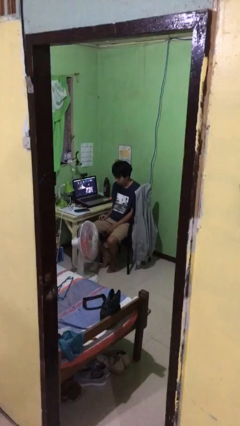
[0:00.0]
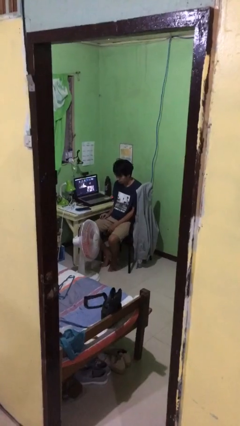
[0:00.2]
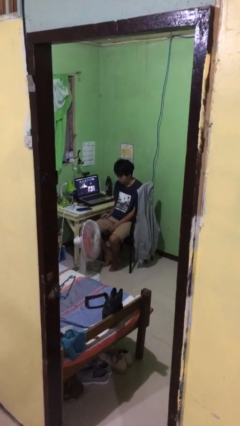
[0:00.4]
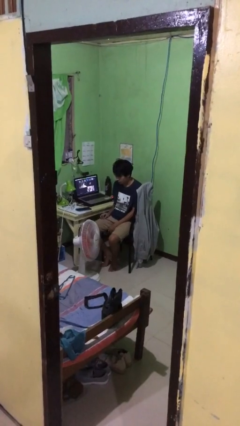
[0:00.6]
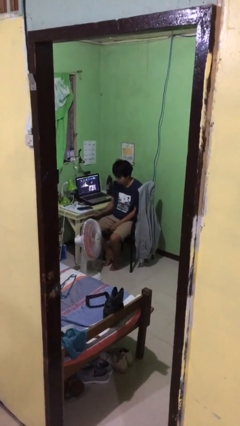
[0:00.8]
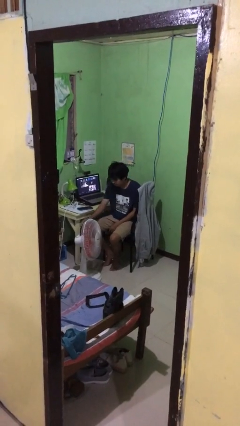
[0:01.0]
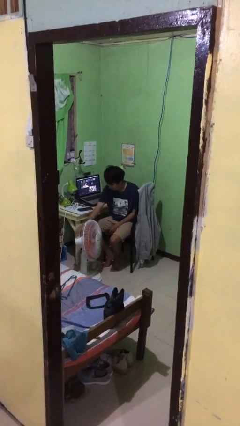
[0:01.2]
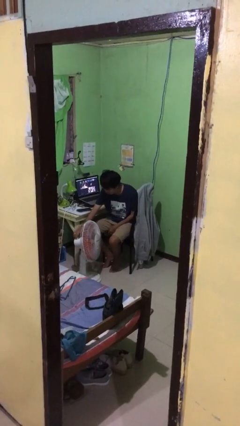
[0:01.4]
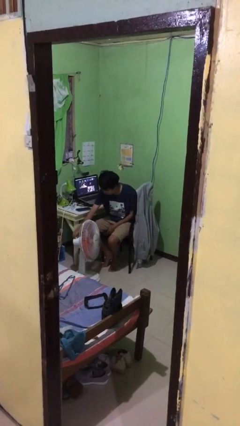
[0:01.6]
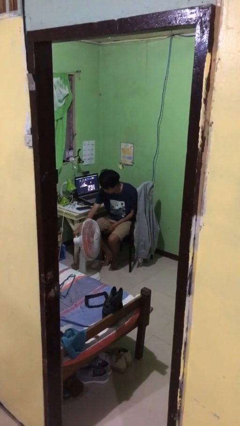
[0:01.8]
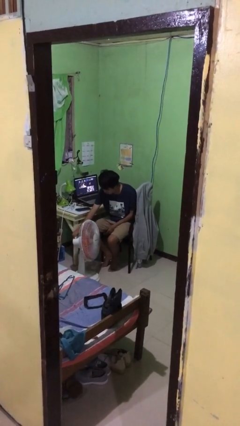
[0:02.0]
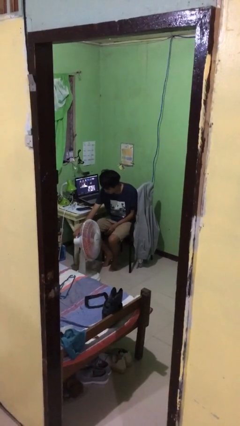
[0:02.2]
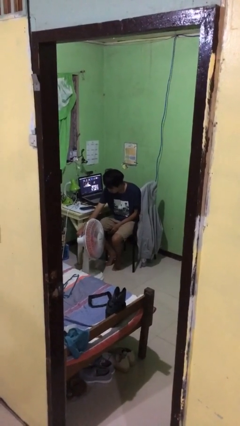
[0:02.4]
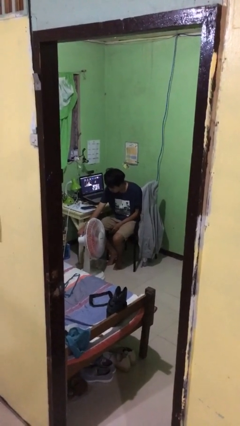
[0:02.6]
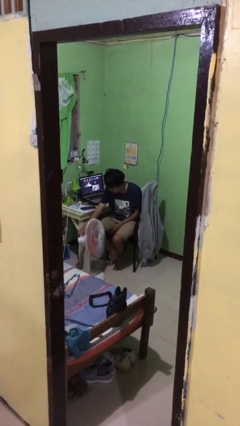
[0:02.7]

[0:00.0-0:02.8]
person turns on fan

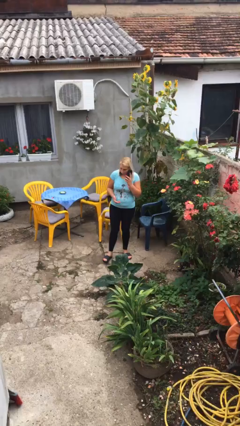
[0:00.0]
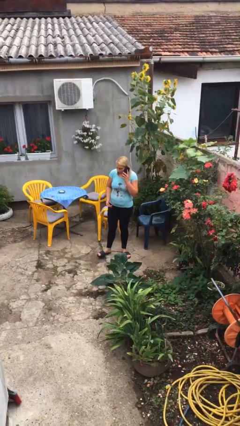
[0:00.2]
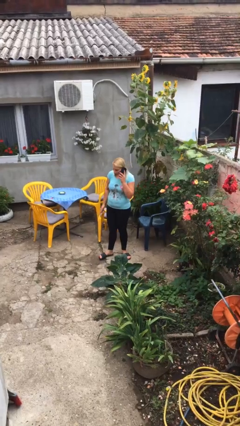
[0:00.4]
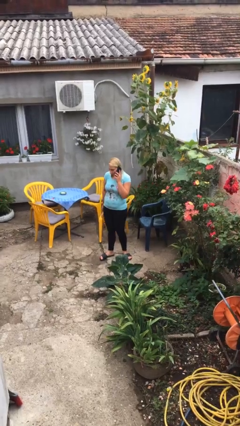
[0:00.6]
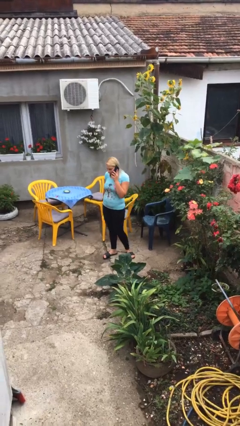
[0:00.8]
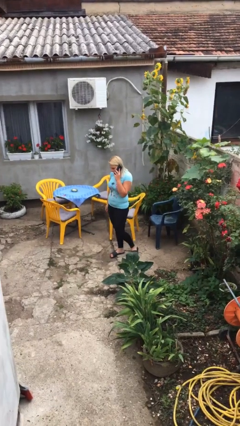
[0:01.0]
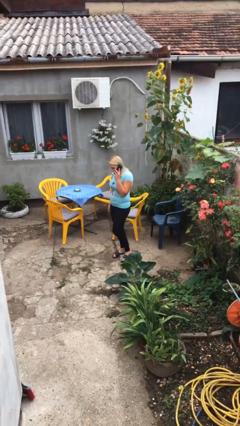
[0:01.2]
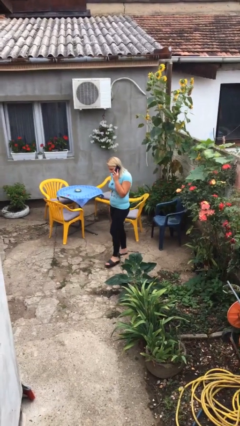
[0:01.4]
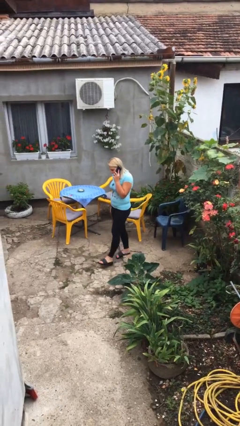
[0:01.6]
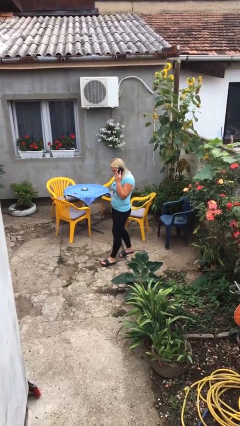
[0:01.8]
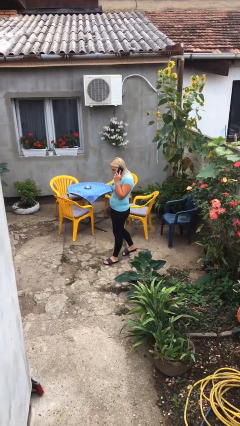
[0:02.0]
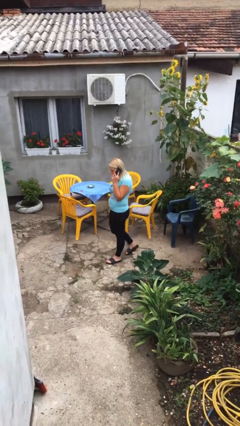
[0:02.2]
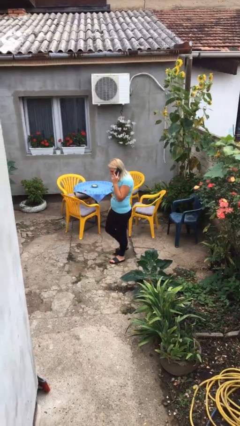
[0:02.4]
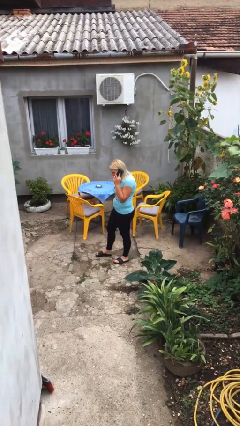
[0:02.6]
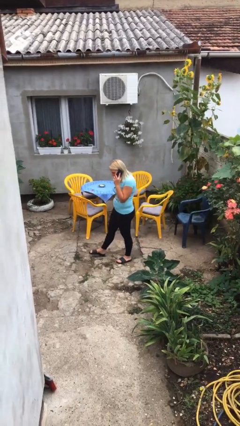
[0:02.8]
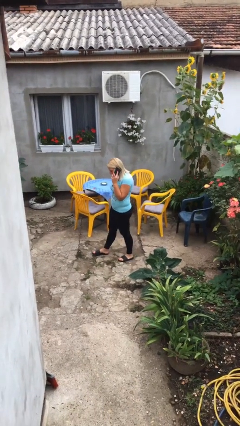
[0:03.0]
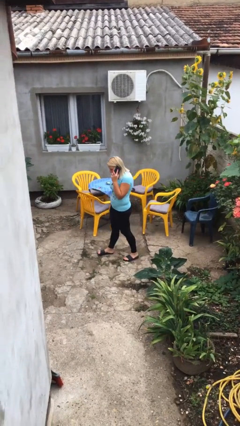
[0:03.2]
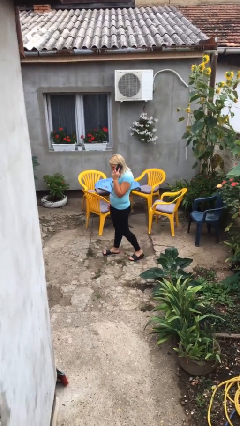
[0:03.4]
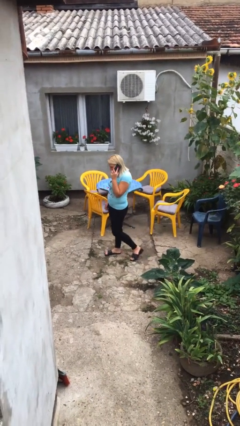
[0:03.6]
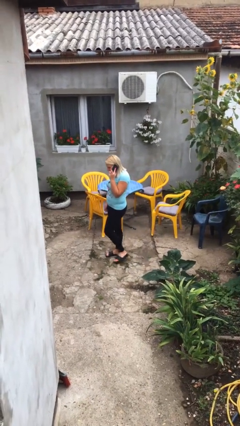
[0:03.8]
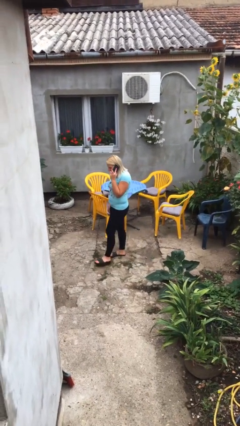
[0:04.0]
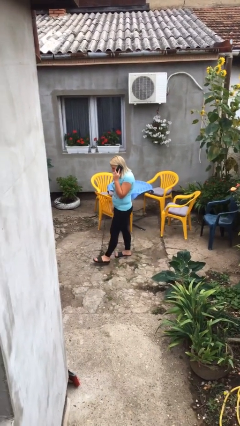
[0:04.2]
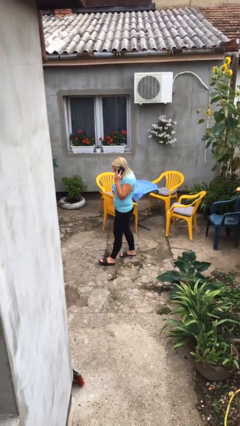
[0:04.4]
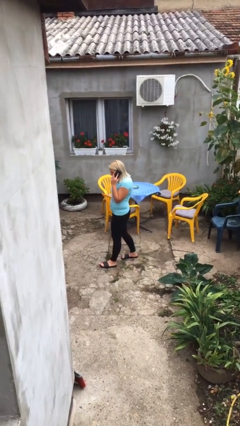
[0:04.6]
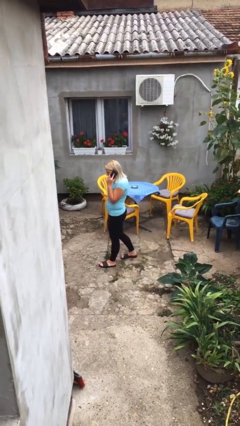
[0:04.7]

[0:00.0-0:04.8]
person talks on phone

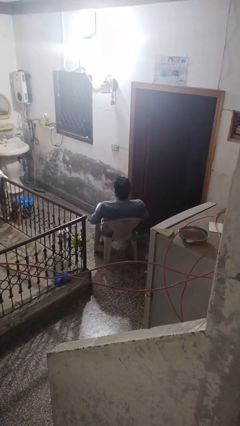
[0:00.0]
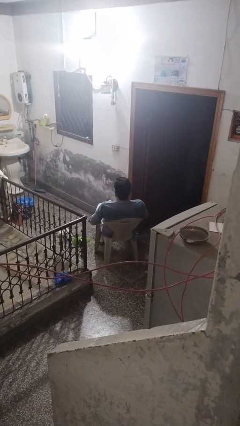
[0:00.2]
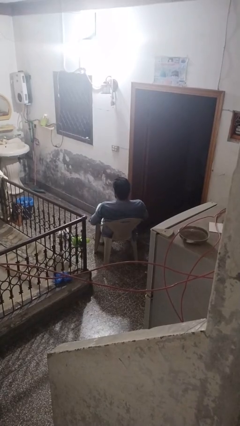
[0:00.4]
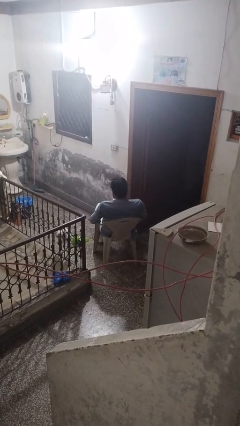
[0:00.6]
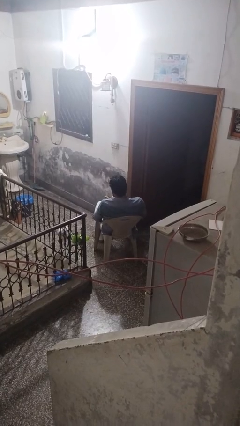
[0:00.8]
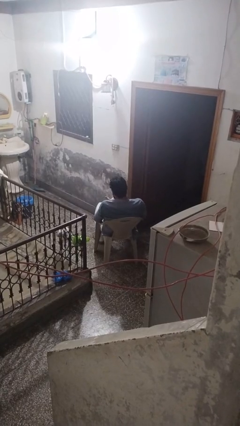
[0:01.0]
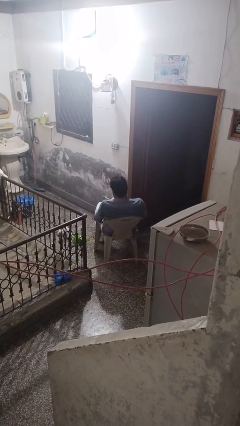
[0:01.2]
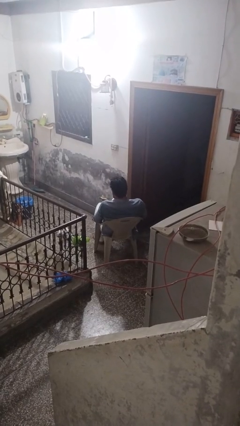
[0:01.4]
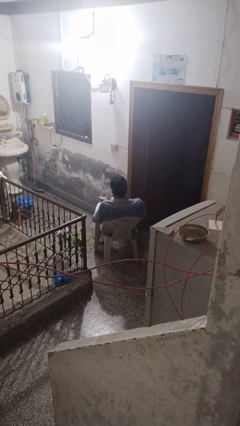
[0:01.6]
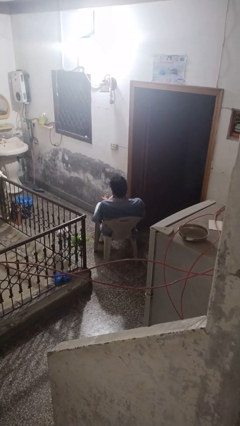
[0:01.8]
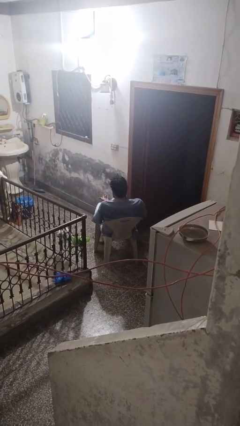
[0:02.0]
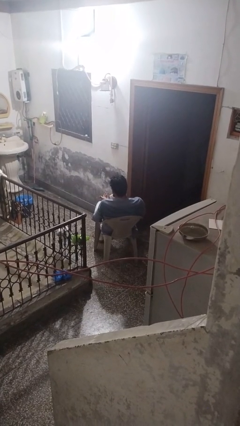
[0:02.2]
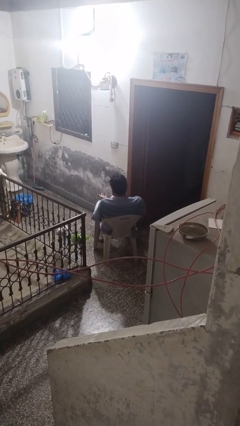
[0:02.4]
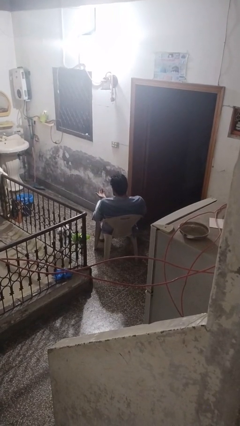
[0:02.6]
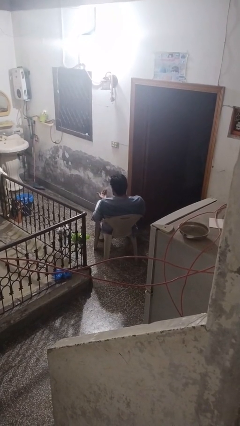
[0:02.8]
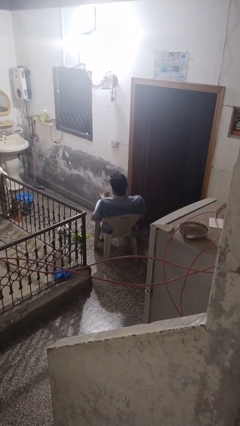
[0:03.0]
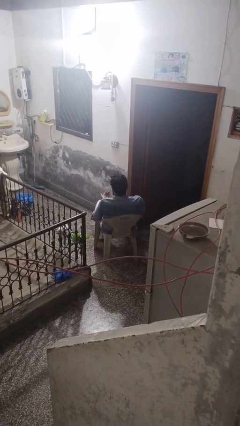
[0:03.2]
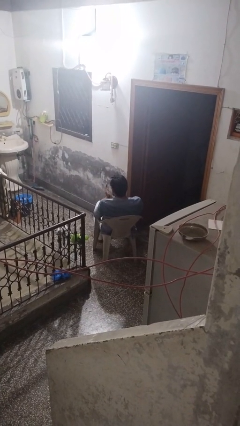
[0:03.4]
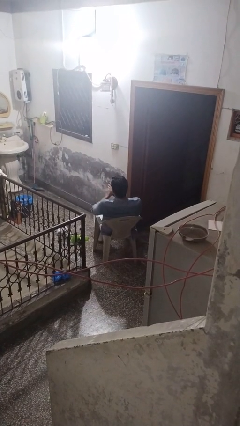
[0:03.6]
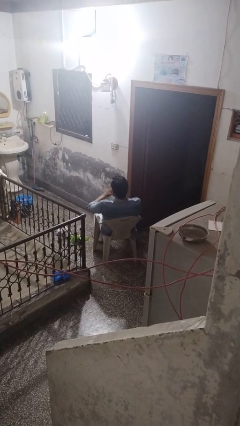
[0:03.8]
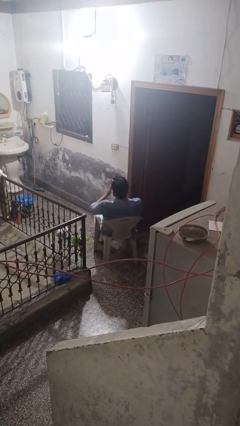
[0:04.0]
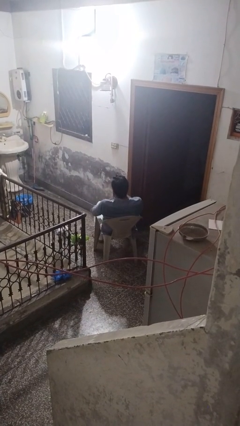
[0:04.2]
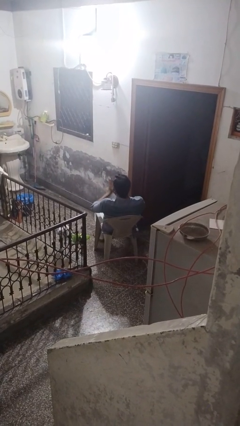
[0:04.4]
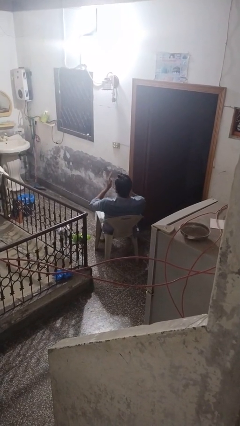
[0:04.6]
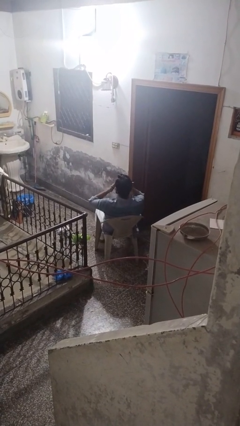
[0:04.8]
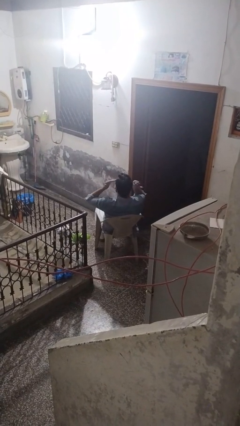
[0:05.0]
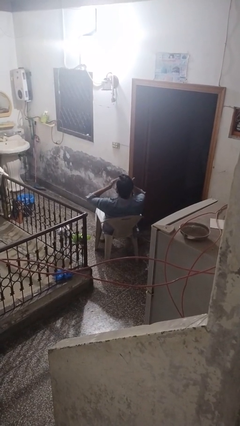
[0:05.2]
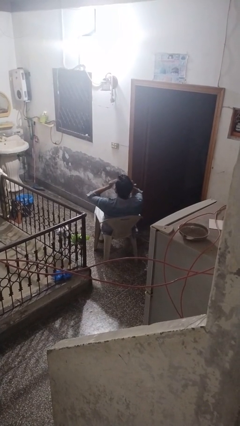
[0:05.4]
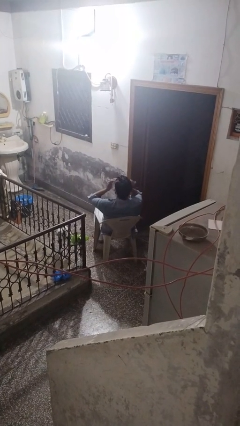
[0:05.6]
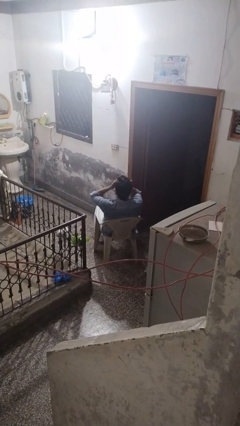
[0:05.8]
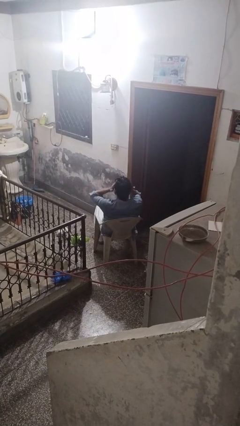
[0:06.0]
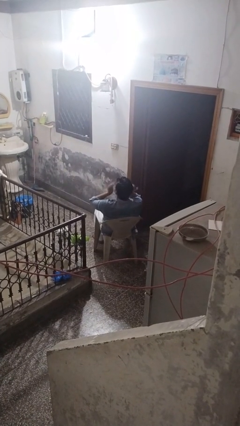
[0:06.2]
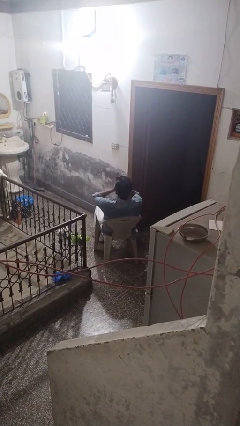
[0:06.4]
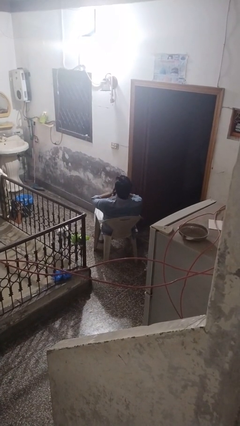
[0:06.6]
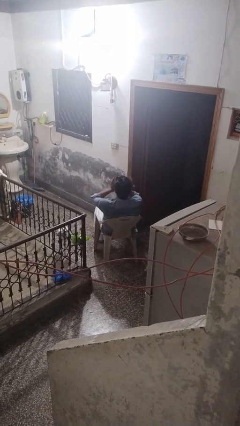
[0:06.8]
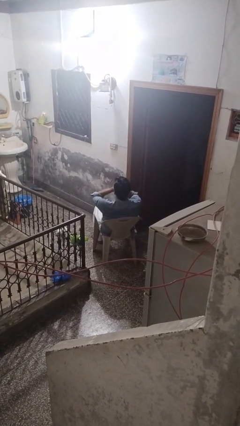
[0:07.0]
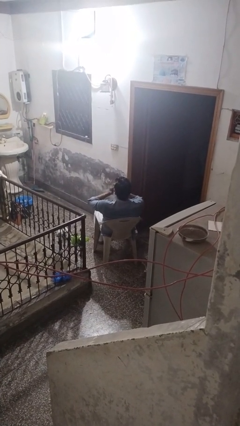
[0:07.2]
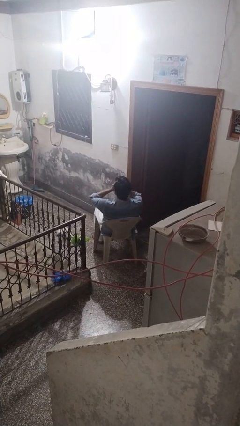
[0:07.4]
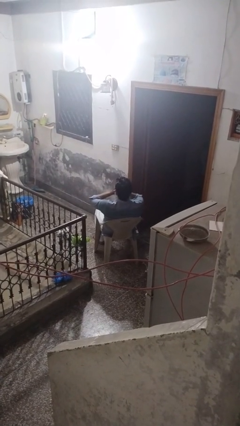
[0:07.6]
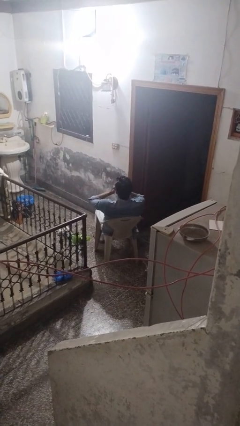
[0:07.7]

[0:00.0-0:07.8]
person applies sunscreen

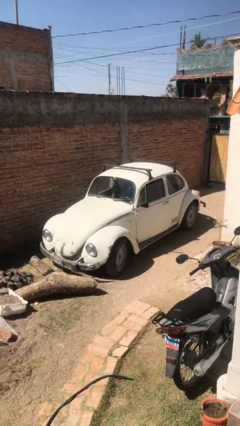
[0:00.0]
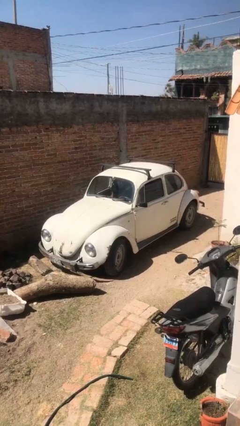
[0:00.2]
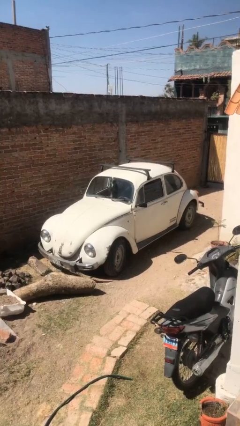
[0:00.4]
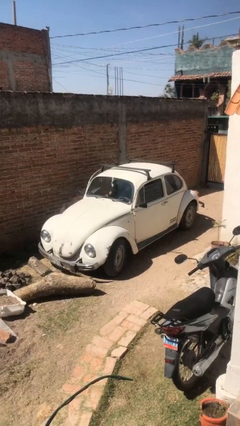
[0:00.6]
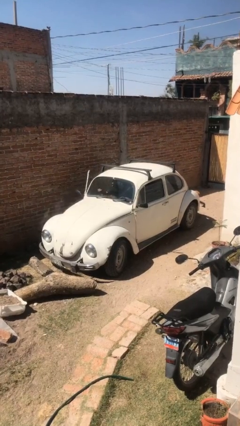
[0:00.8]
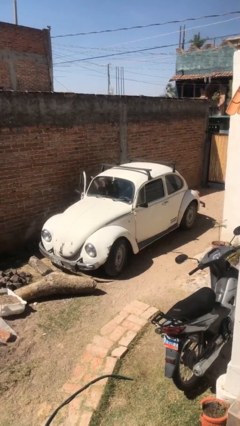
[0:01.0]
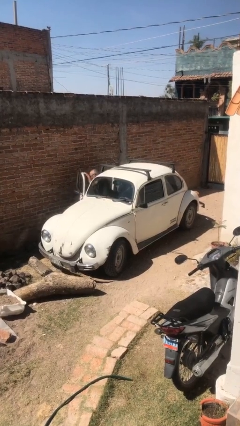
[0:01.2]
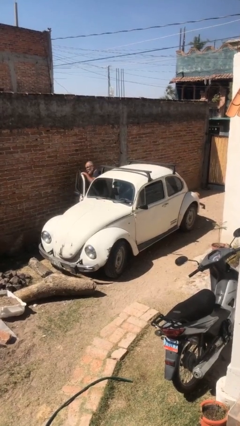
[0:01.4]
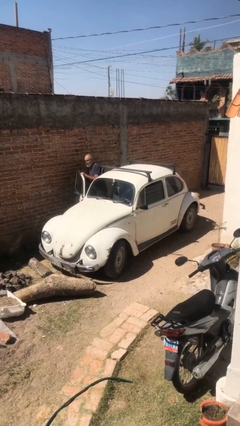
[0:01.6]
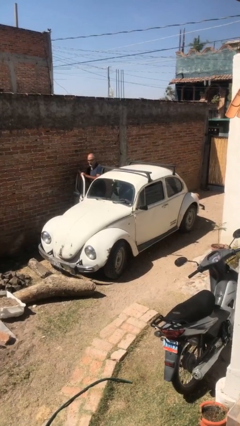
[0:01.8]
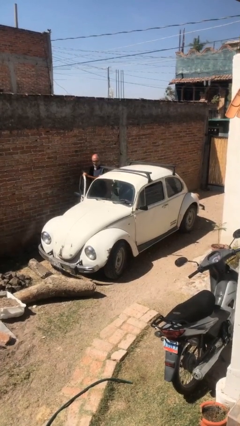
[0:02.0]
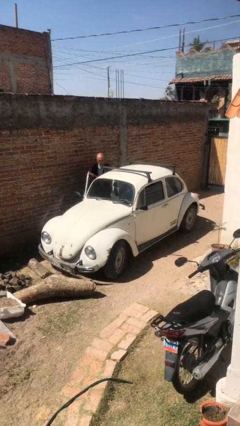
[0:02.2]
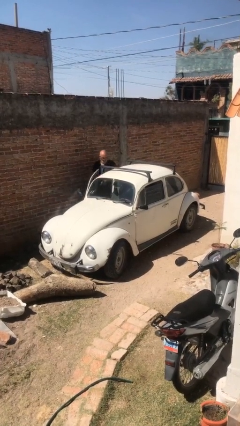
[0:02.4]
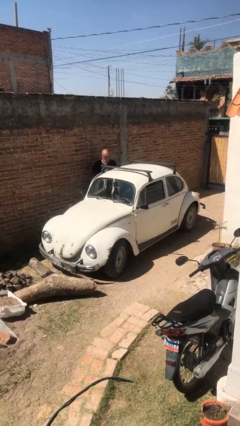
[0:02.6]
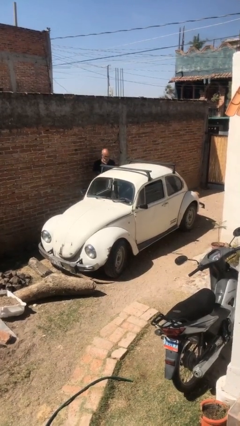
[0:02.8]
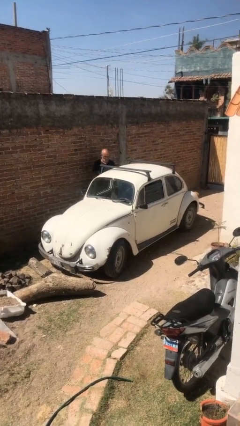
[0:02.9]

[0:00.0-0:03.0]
car drops off person
